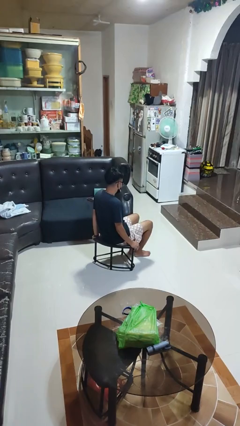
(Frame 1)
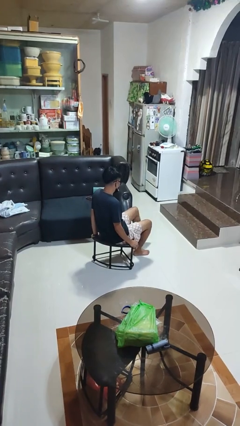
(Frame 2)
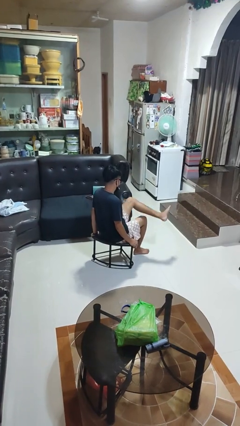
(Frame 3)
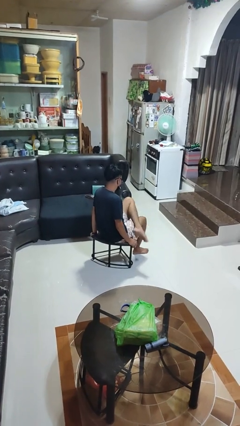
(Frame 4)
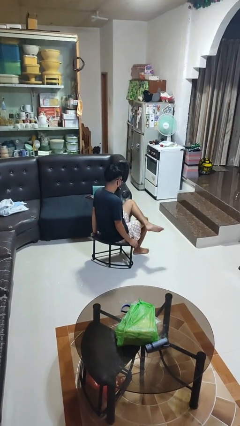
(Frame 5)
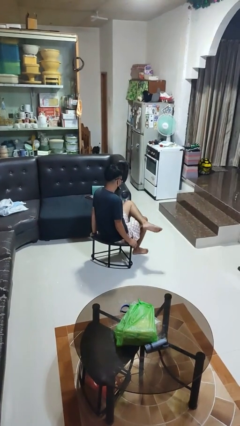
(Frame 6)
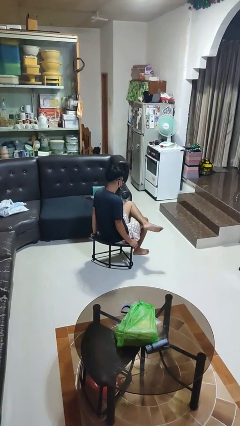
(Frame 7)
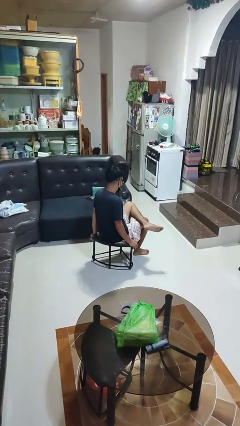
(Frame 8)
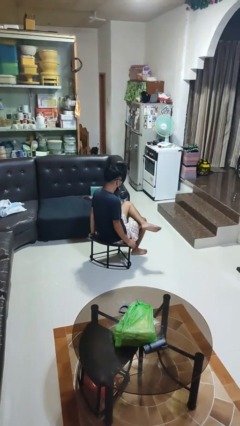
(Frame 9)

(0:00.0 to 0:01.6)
person crosses legs

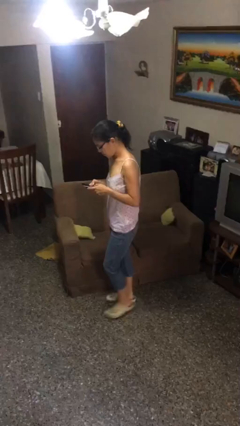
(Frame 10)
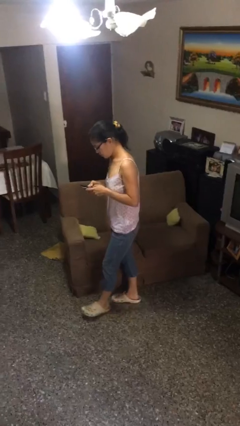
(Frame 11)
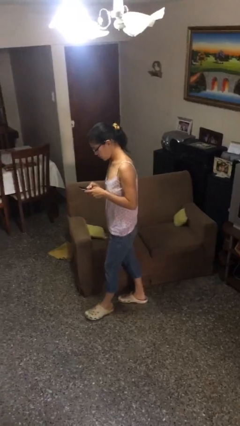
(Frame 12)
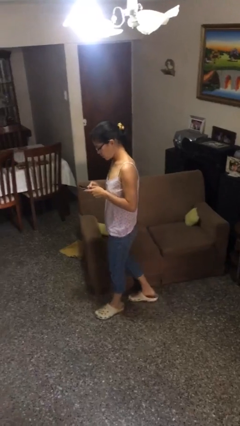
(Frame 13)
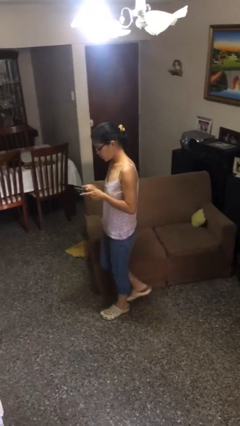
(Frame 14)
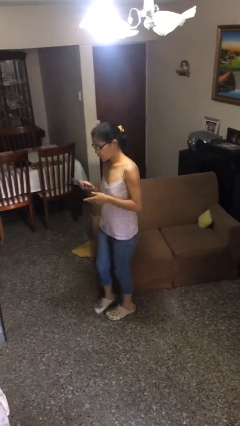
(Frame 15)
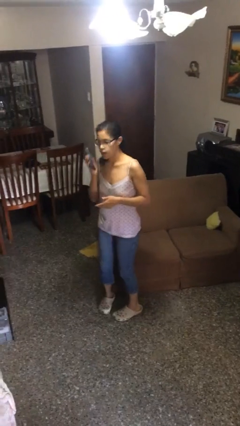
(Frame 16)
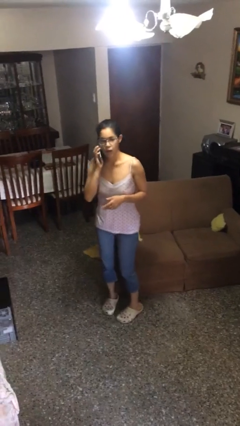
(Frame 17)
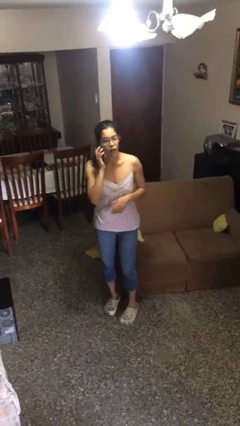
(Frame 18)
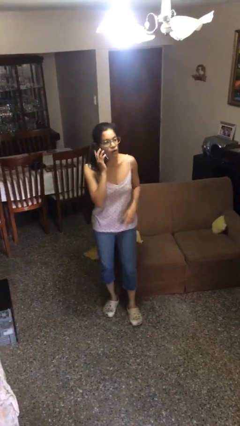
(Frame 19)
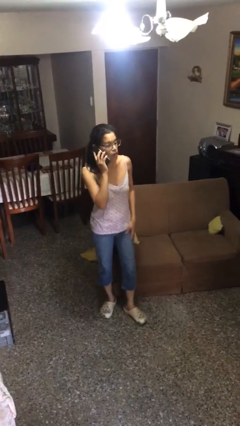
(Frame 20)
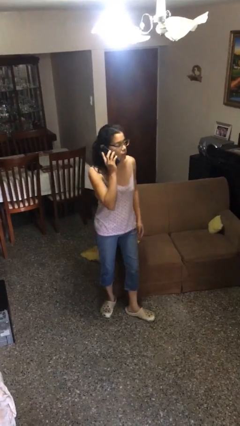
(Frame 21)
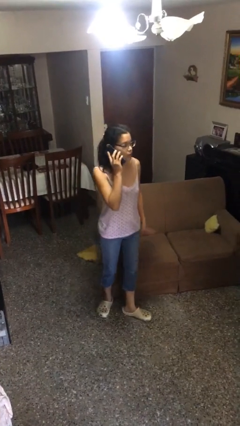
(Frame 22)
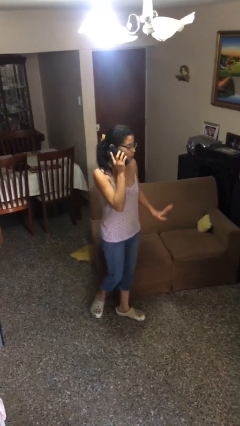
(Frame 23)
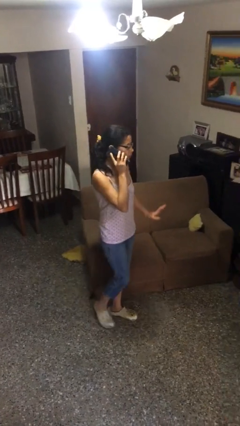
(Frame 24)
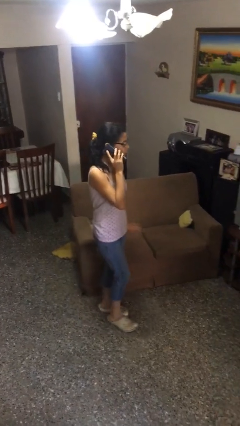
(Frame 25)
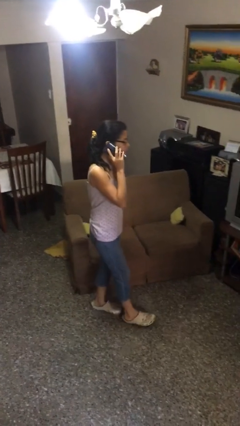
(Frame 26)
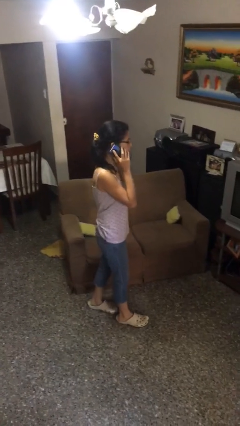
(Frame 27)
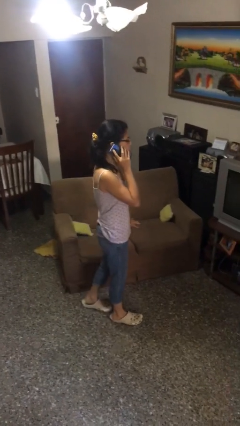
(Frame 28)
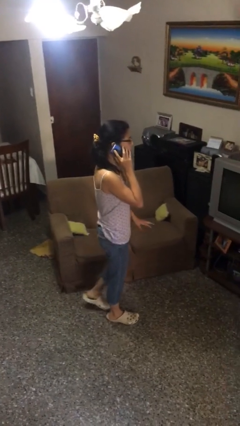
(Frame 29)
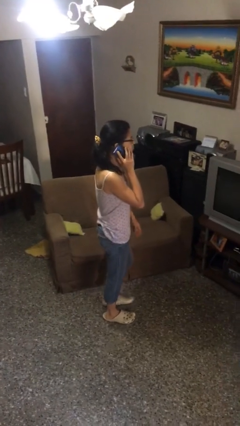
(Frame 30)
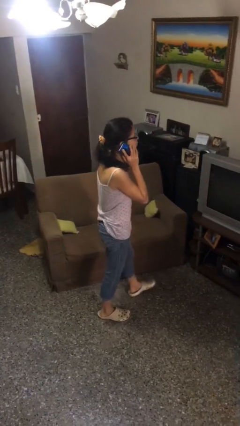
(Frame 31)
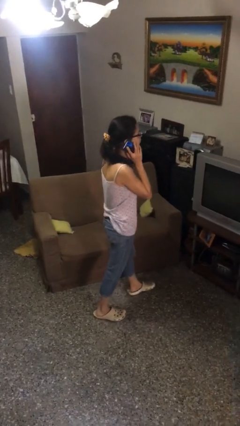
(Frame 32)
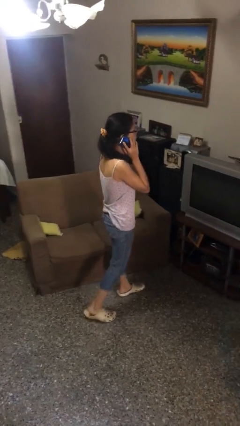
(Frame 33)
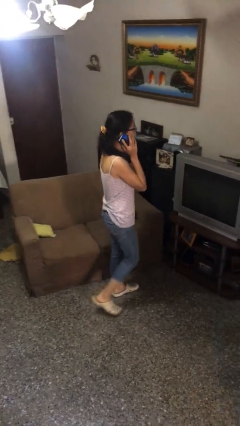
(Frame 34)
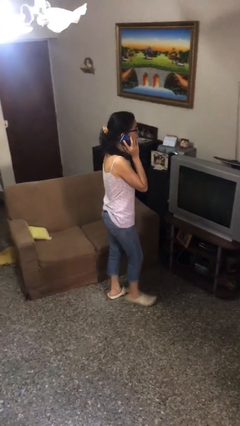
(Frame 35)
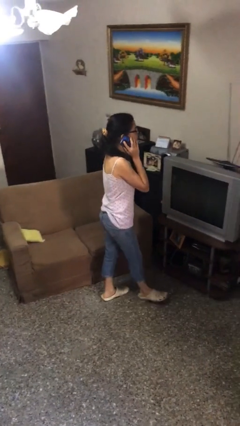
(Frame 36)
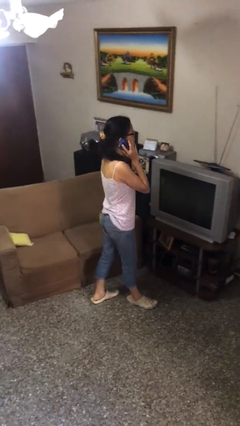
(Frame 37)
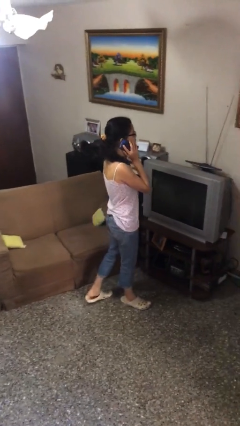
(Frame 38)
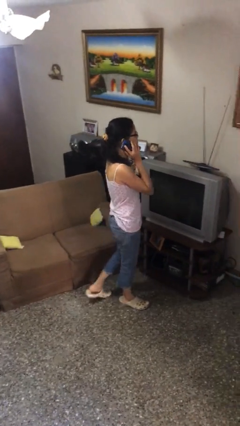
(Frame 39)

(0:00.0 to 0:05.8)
person talks on phone

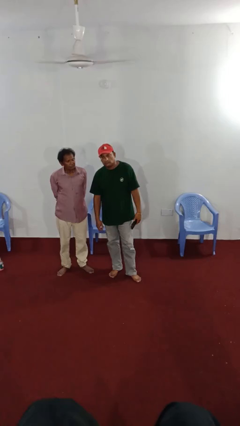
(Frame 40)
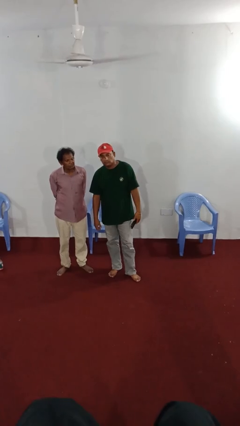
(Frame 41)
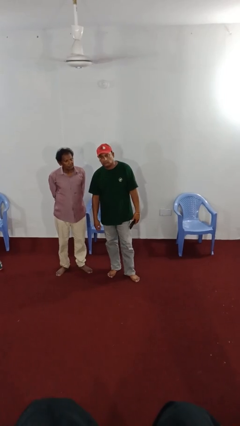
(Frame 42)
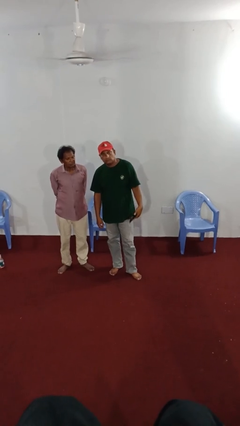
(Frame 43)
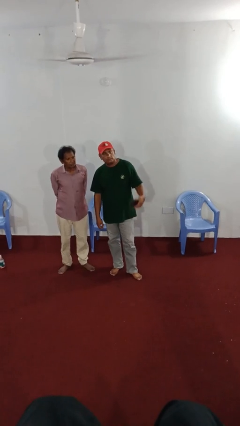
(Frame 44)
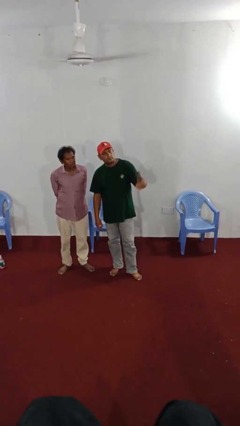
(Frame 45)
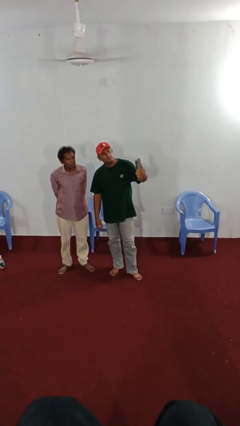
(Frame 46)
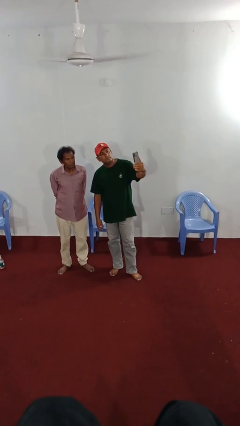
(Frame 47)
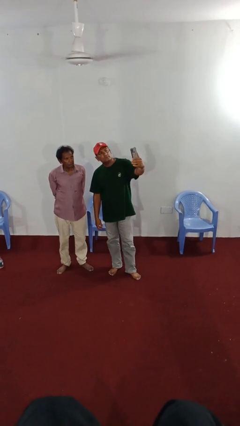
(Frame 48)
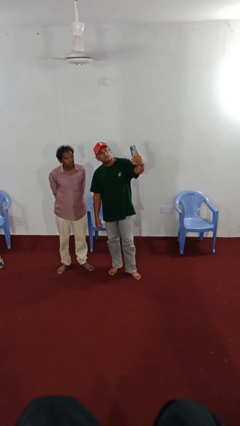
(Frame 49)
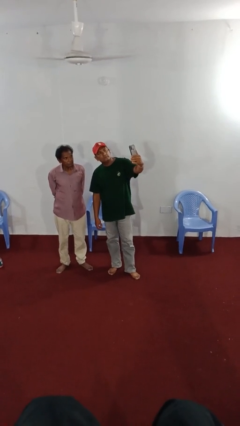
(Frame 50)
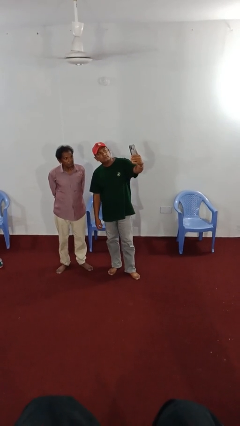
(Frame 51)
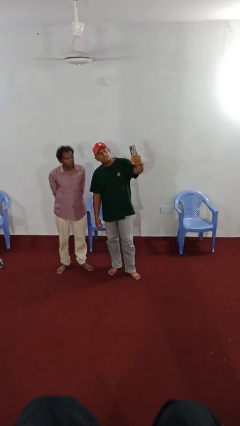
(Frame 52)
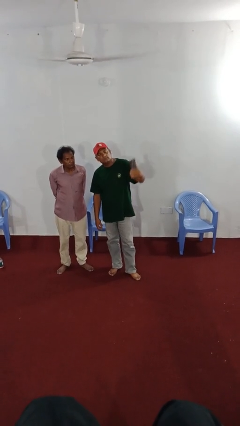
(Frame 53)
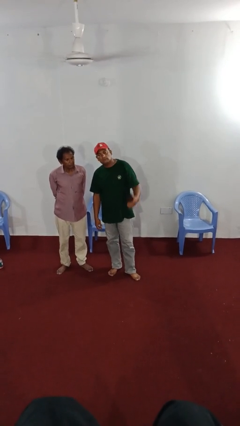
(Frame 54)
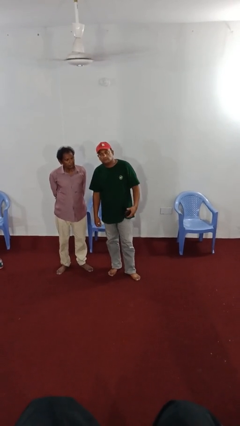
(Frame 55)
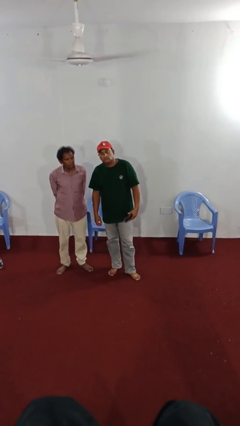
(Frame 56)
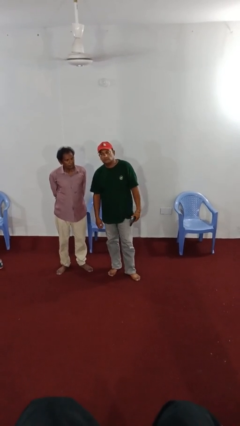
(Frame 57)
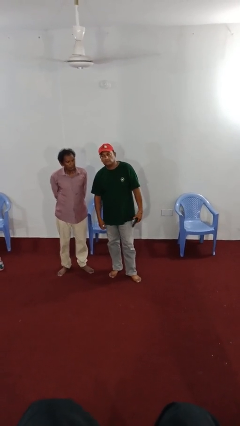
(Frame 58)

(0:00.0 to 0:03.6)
person takes selfie with person

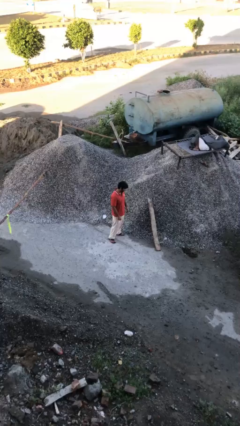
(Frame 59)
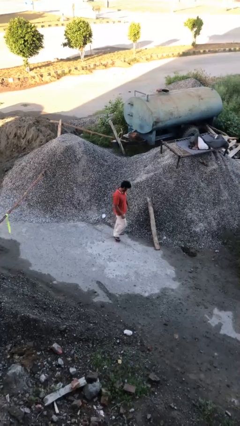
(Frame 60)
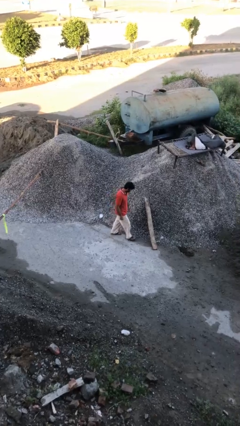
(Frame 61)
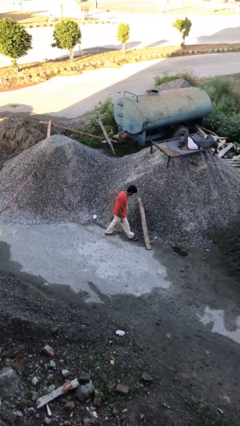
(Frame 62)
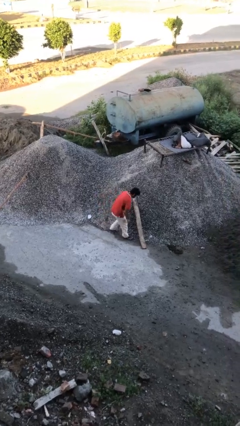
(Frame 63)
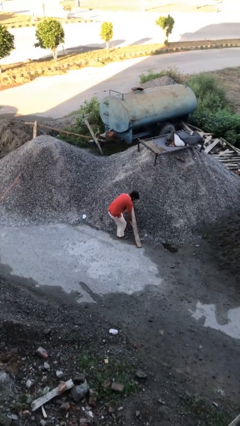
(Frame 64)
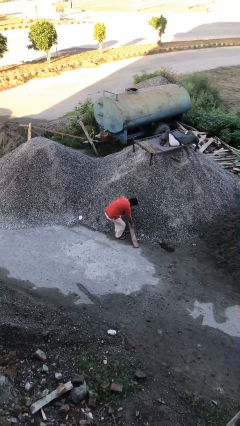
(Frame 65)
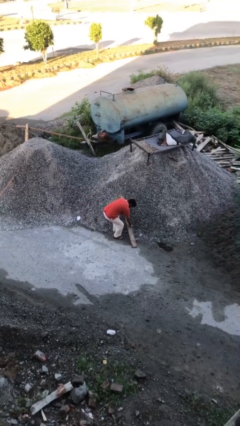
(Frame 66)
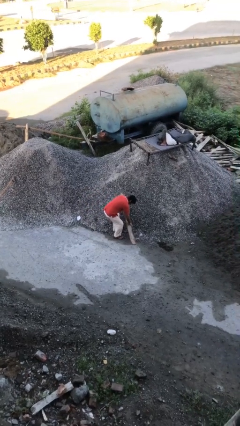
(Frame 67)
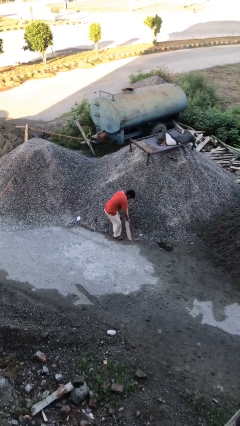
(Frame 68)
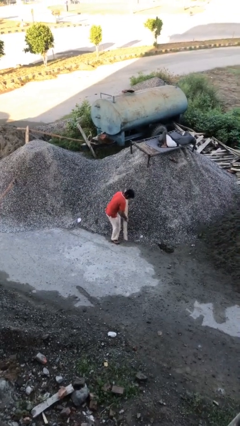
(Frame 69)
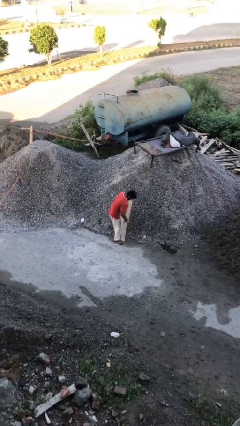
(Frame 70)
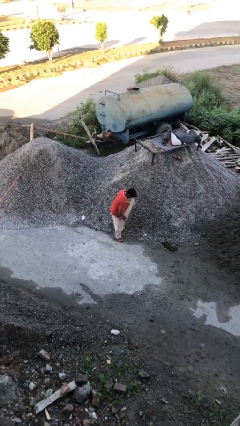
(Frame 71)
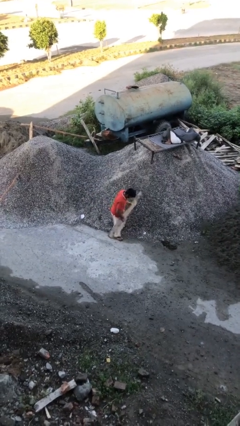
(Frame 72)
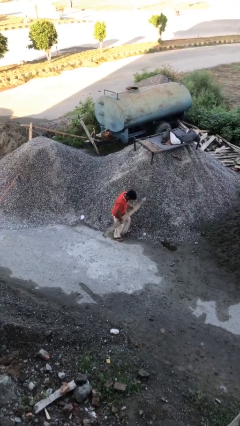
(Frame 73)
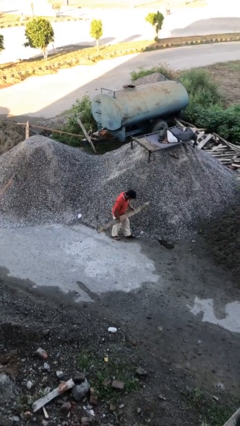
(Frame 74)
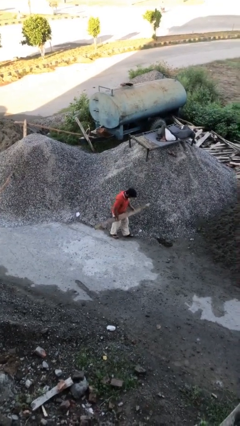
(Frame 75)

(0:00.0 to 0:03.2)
person picks up object from floor

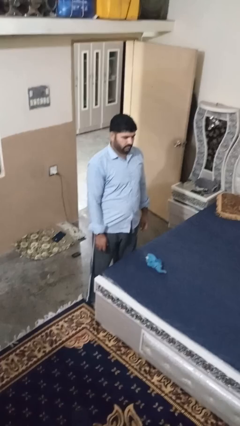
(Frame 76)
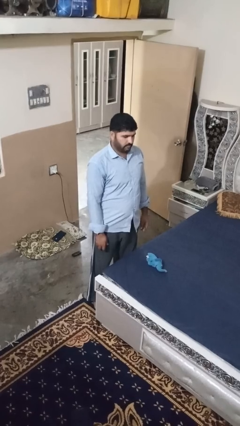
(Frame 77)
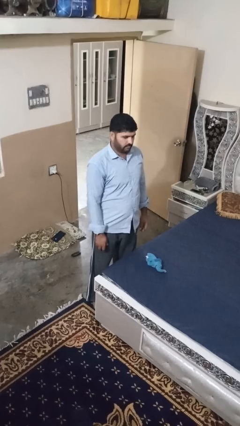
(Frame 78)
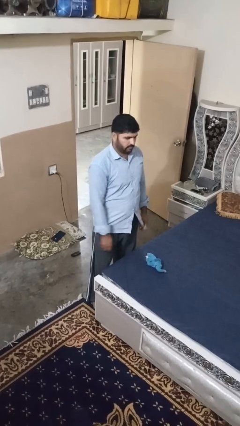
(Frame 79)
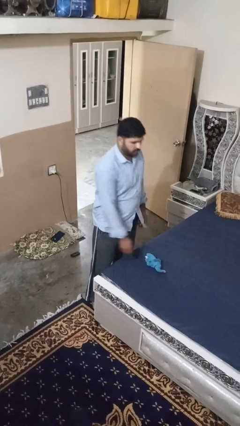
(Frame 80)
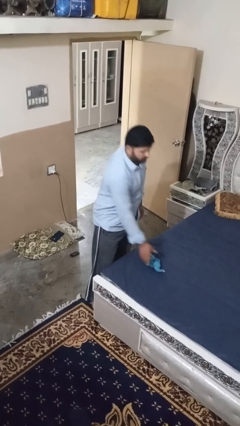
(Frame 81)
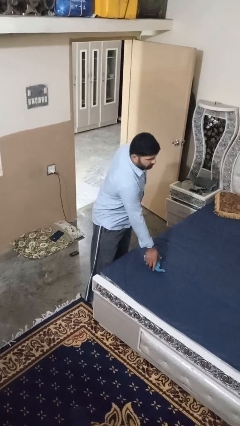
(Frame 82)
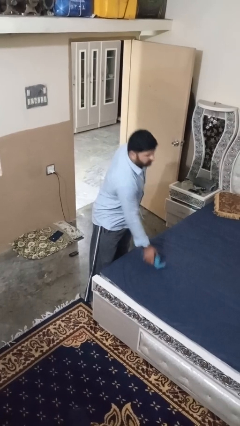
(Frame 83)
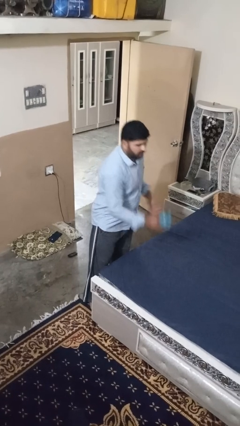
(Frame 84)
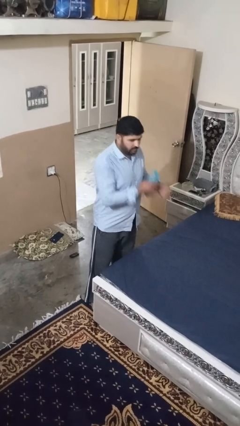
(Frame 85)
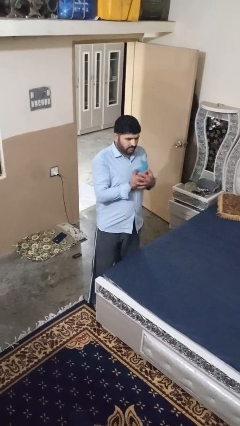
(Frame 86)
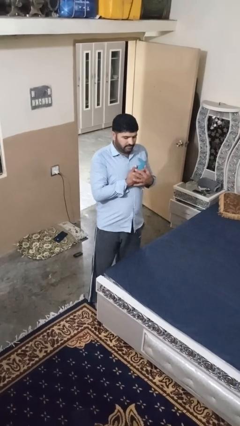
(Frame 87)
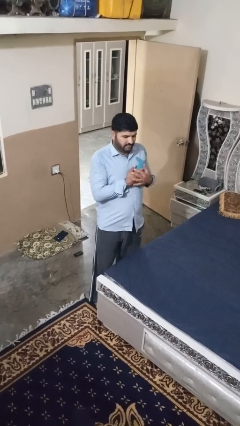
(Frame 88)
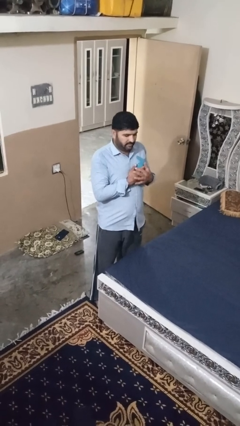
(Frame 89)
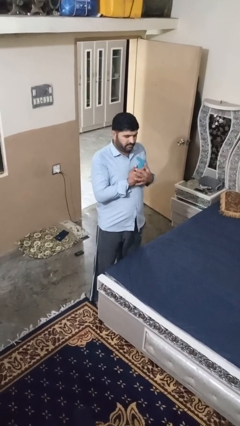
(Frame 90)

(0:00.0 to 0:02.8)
person hugs stuffed animal

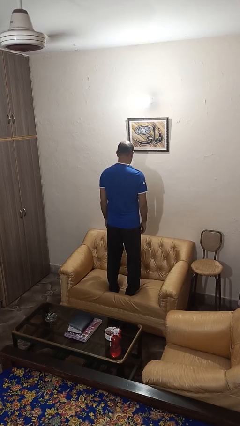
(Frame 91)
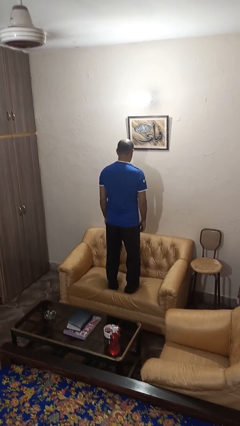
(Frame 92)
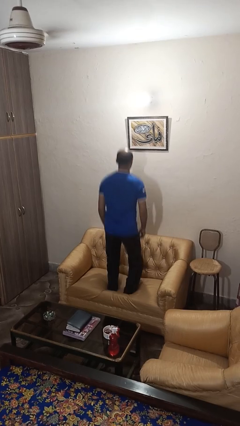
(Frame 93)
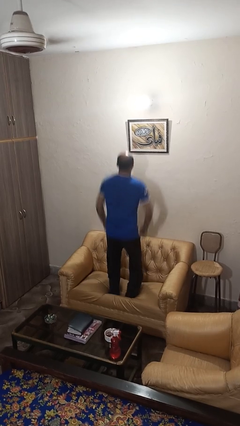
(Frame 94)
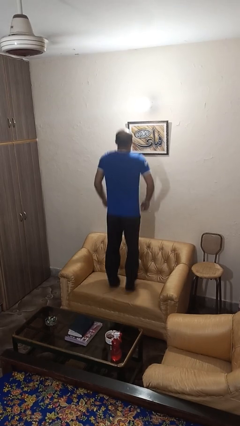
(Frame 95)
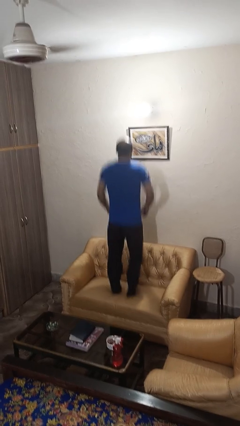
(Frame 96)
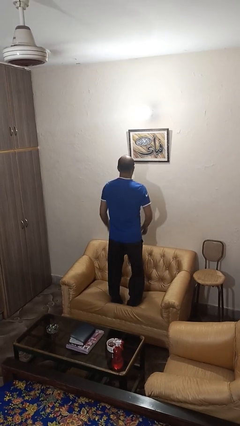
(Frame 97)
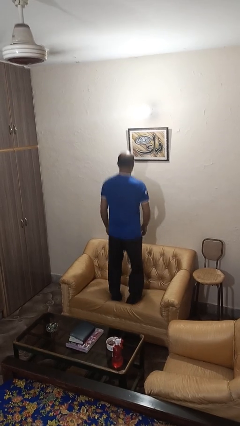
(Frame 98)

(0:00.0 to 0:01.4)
person jumps on couch
